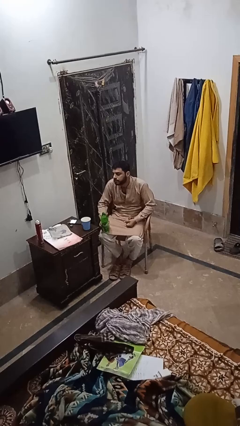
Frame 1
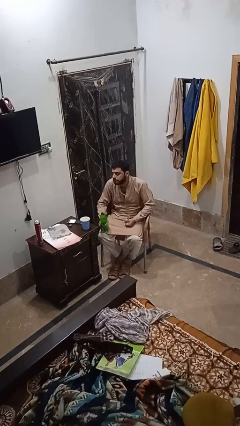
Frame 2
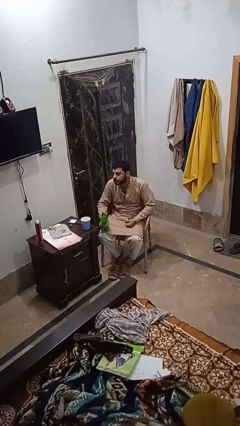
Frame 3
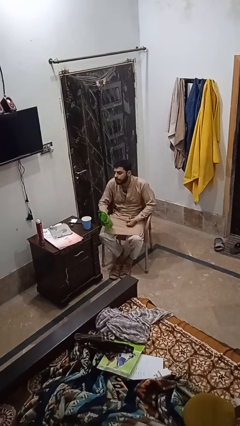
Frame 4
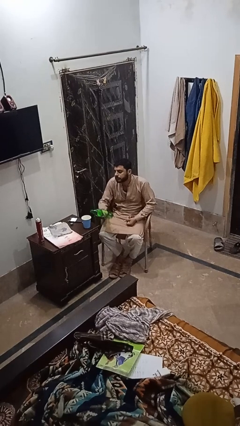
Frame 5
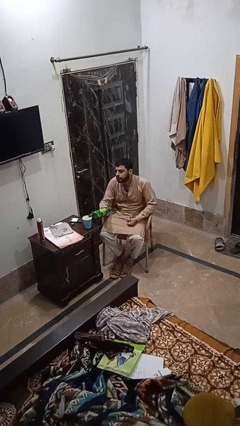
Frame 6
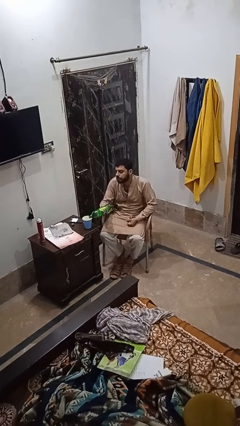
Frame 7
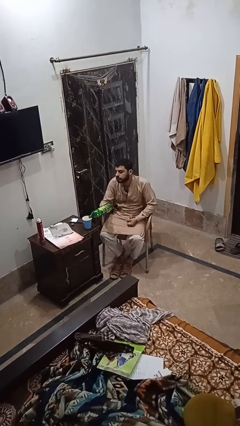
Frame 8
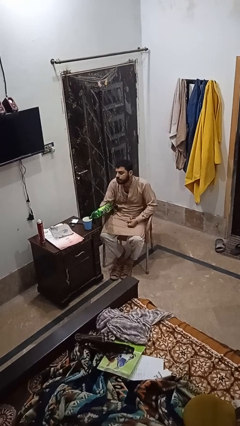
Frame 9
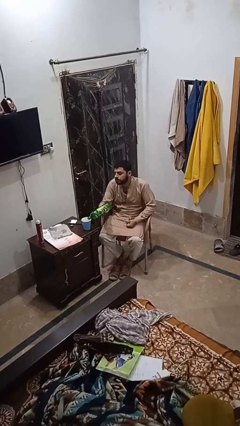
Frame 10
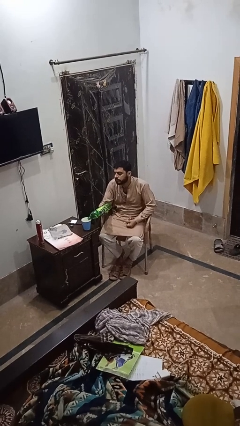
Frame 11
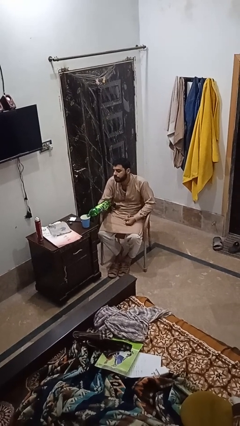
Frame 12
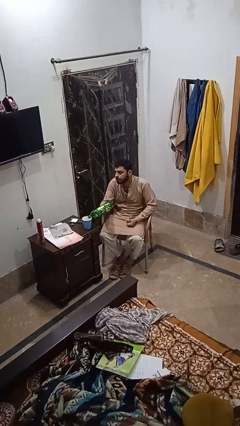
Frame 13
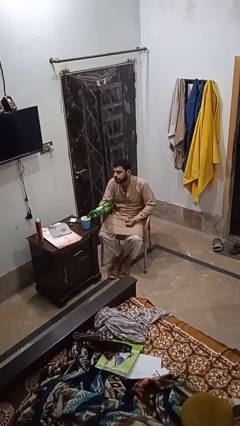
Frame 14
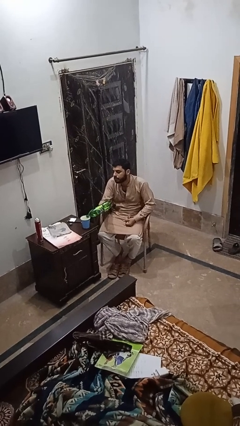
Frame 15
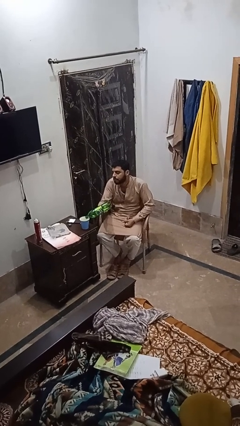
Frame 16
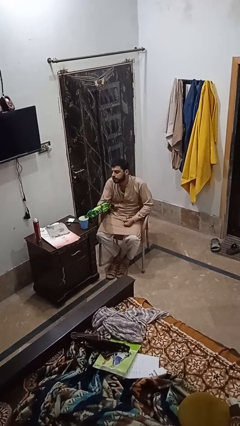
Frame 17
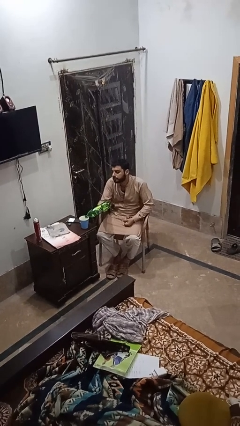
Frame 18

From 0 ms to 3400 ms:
person pours liquid into cup

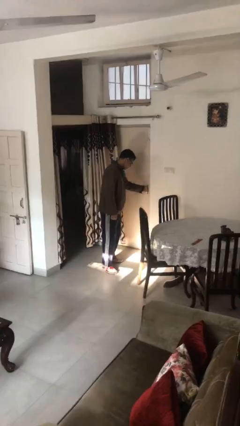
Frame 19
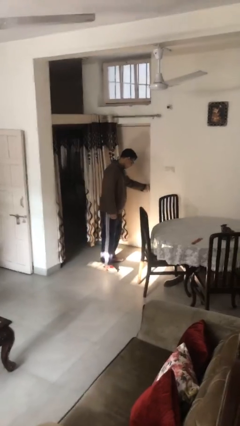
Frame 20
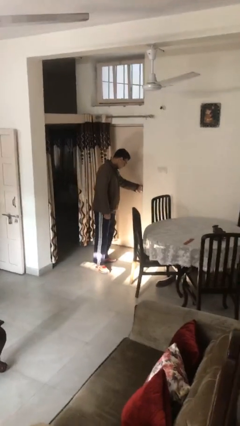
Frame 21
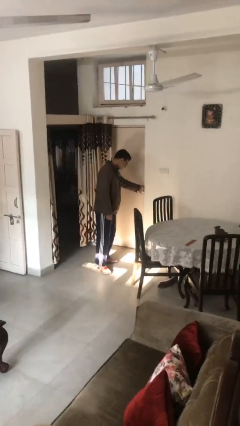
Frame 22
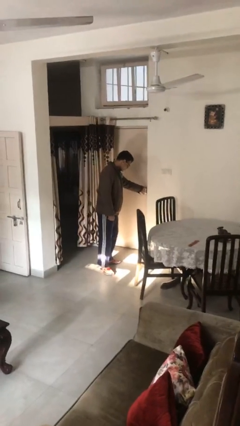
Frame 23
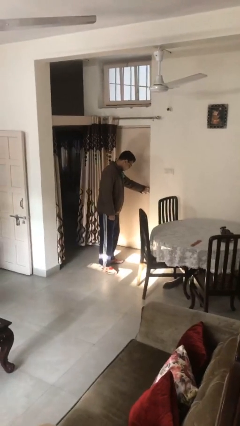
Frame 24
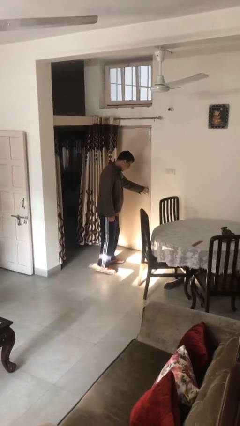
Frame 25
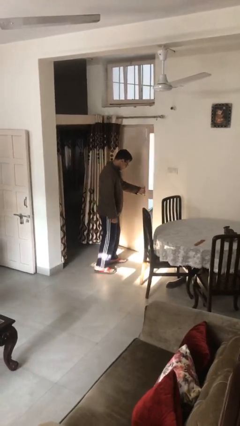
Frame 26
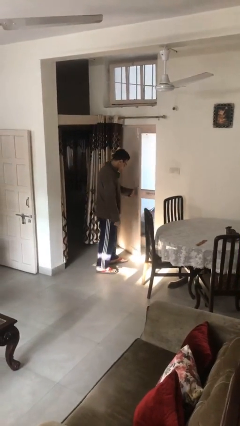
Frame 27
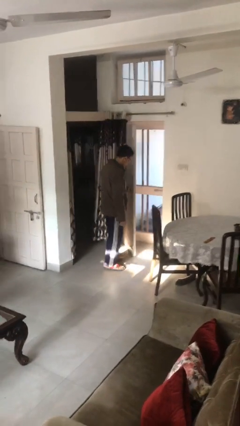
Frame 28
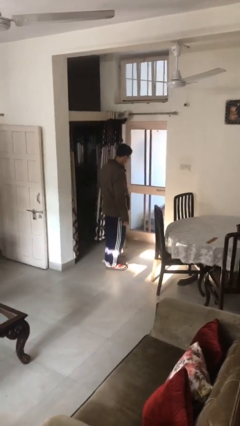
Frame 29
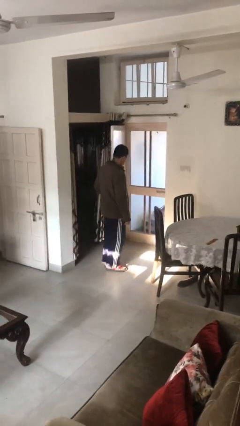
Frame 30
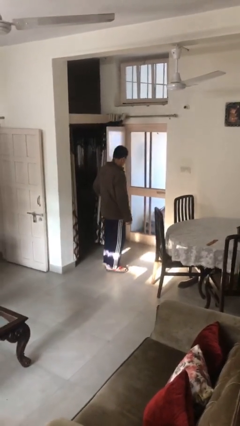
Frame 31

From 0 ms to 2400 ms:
person opens facility door

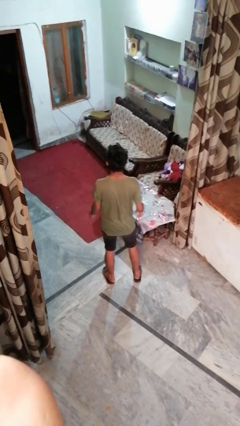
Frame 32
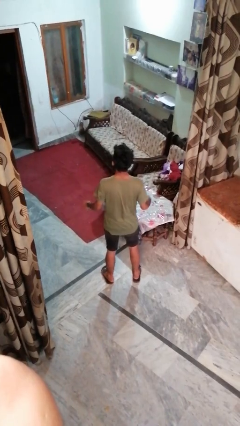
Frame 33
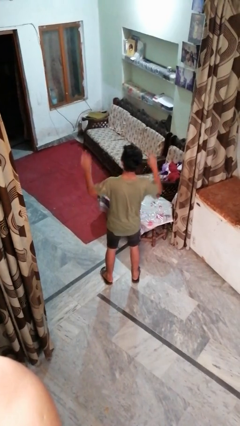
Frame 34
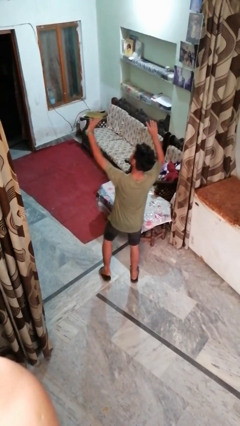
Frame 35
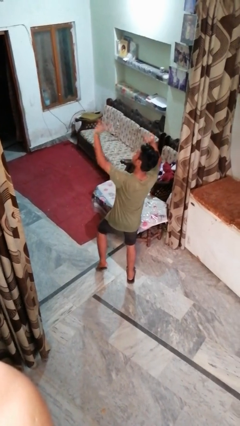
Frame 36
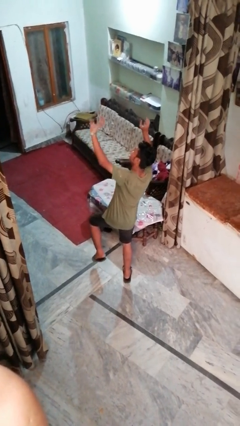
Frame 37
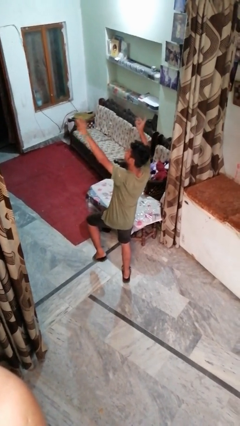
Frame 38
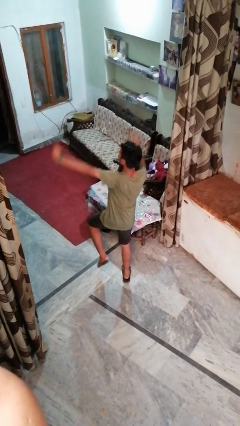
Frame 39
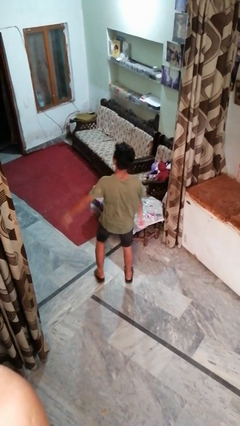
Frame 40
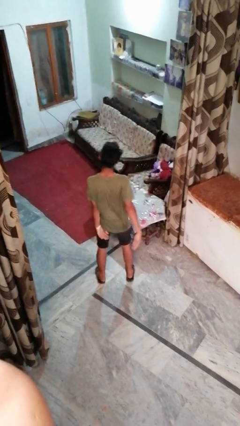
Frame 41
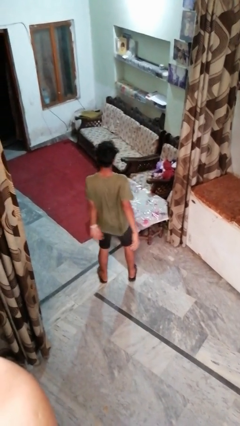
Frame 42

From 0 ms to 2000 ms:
person dances in place

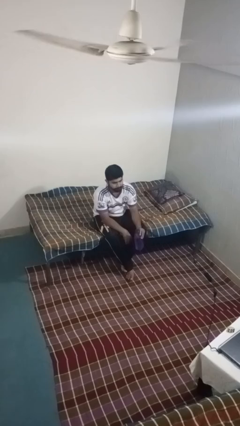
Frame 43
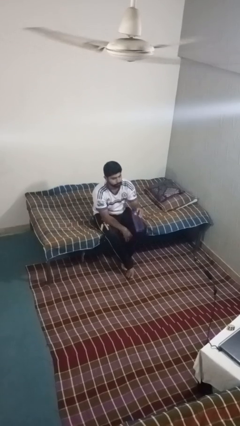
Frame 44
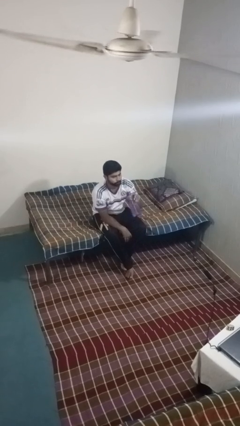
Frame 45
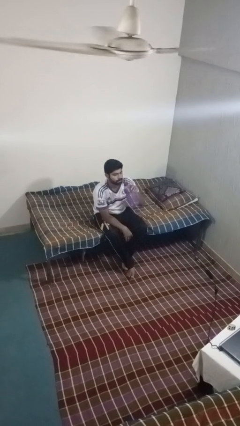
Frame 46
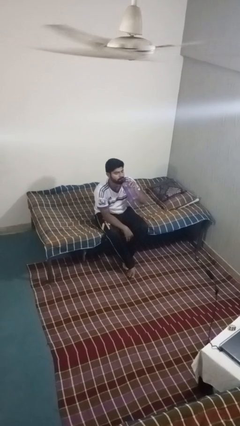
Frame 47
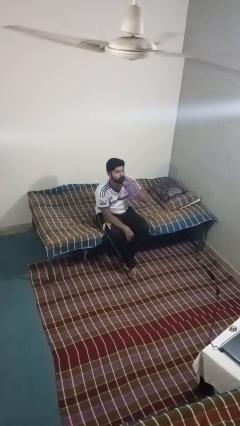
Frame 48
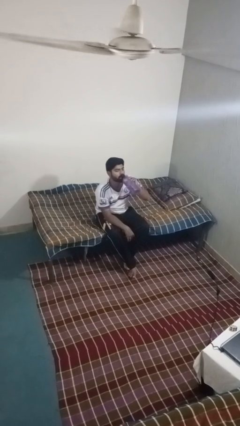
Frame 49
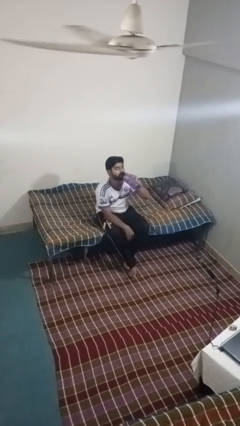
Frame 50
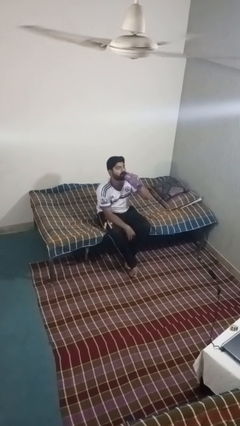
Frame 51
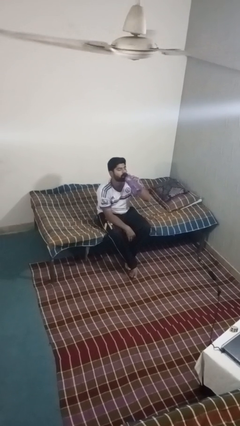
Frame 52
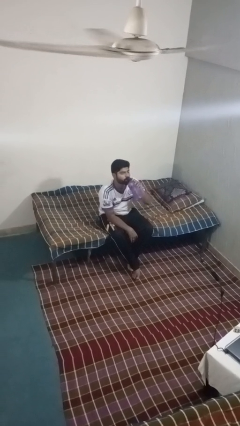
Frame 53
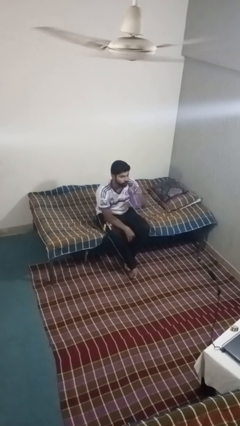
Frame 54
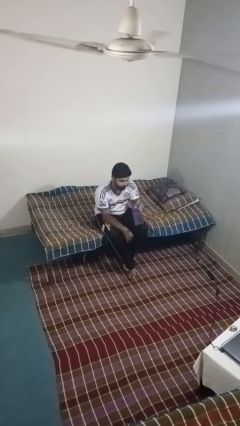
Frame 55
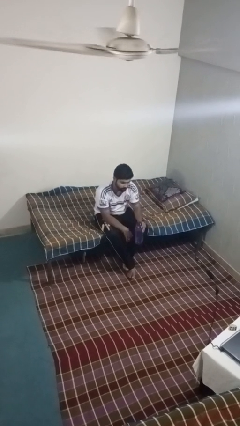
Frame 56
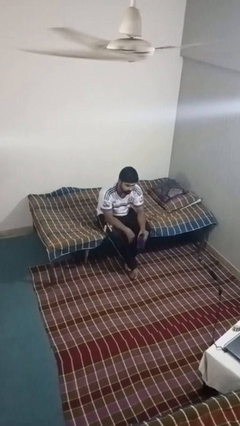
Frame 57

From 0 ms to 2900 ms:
person drinks from bottle

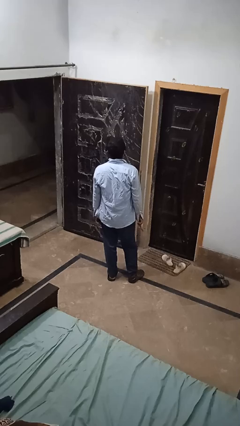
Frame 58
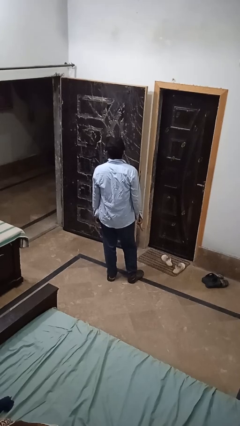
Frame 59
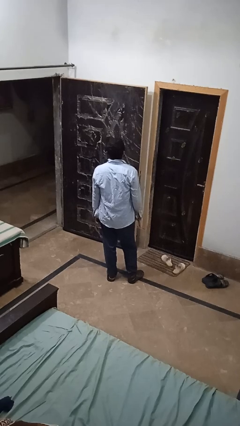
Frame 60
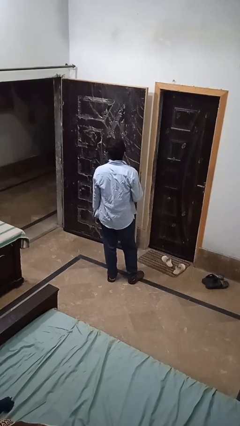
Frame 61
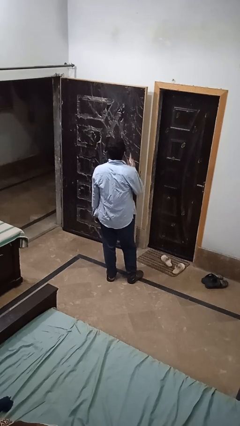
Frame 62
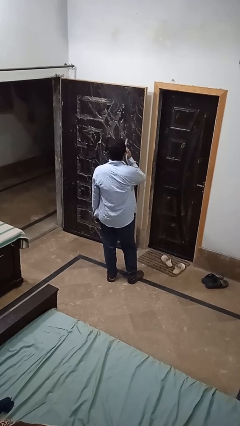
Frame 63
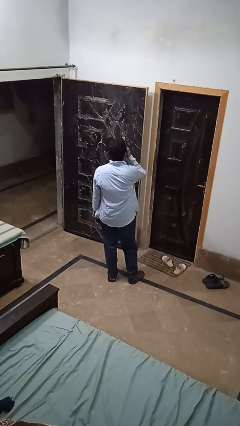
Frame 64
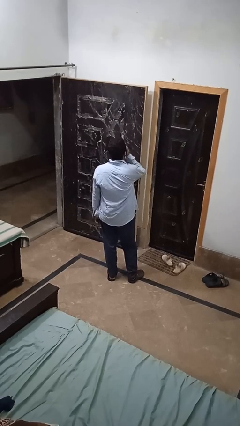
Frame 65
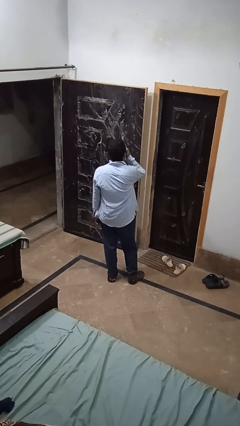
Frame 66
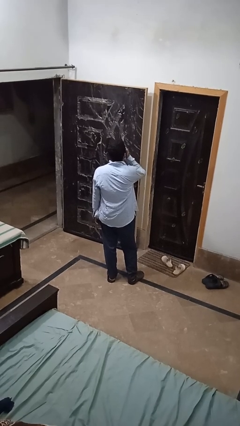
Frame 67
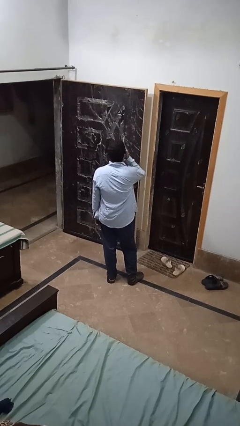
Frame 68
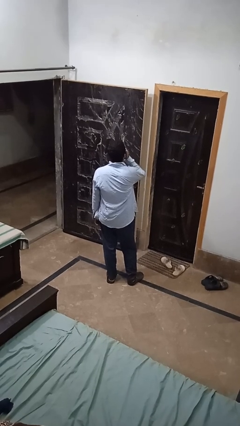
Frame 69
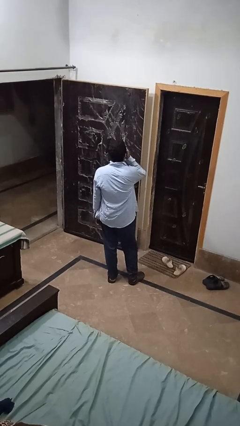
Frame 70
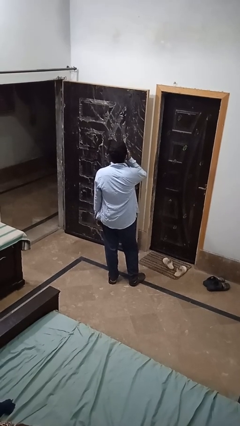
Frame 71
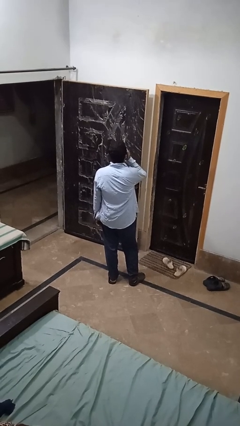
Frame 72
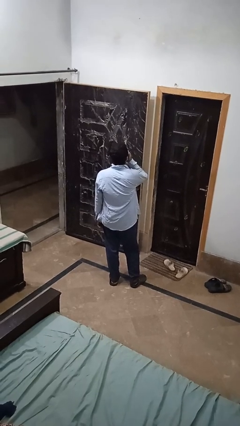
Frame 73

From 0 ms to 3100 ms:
person vapes

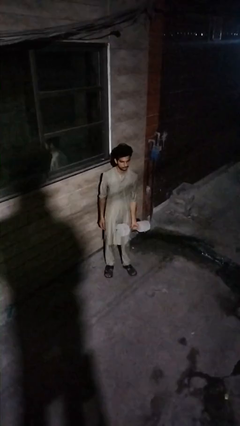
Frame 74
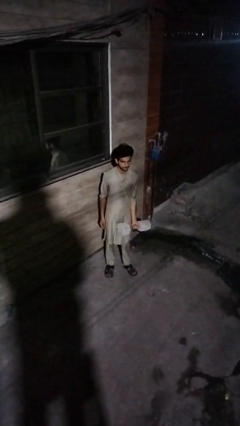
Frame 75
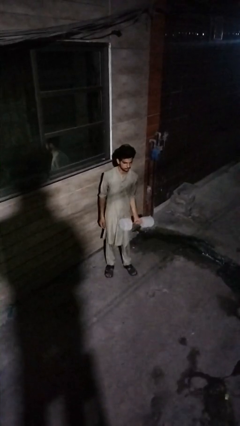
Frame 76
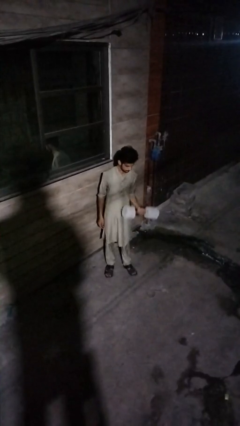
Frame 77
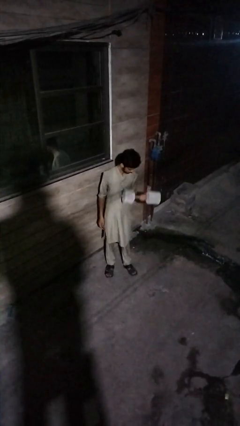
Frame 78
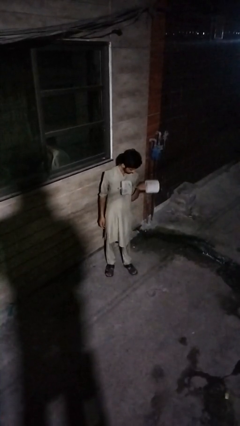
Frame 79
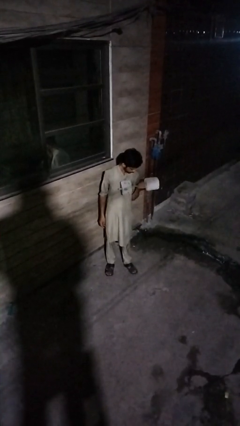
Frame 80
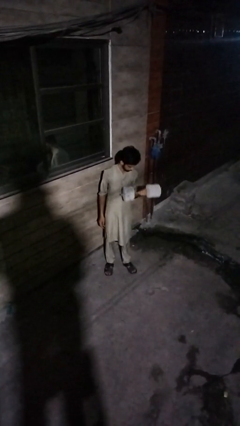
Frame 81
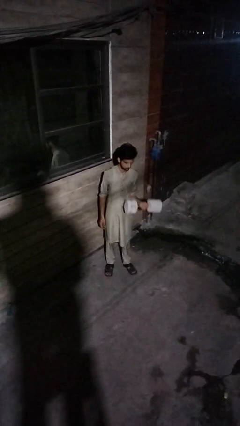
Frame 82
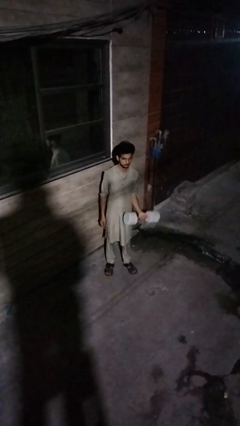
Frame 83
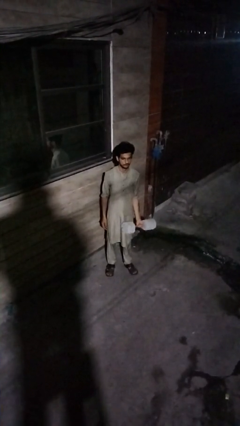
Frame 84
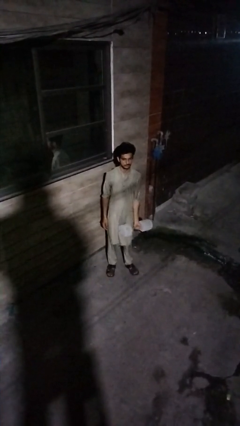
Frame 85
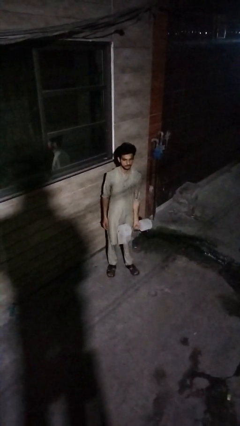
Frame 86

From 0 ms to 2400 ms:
person lifts dumbbells

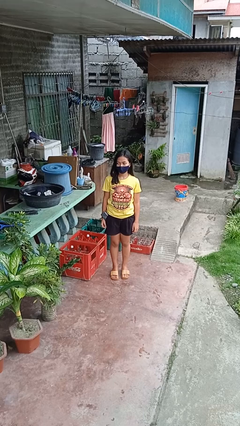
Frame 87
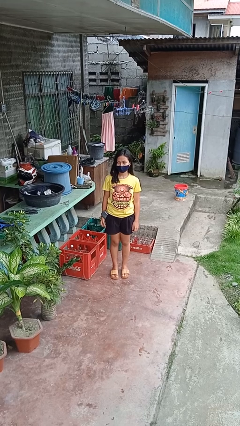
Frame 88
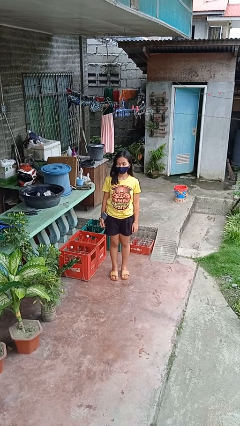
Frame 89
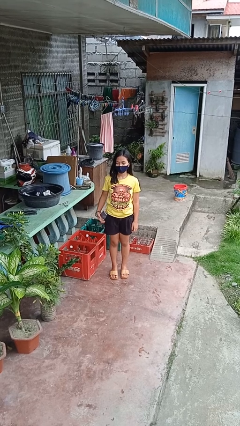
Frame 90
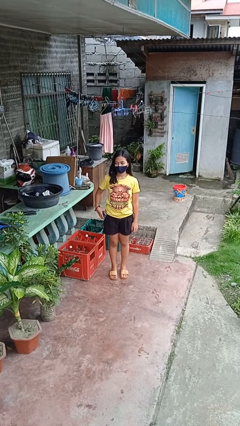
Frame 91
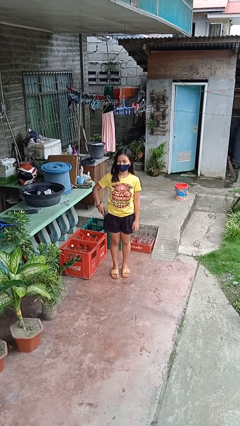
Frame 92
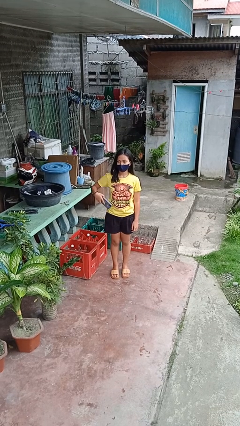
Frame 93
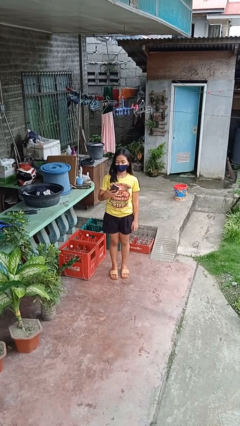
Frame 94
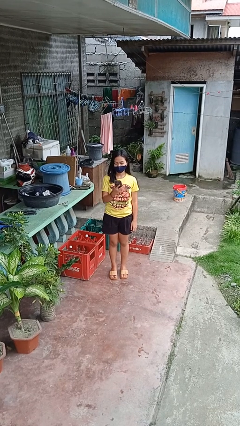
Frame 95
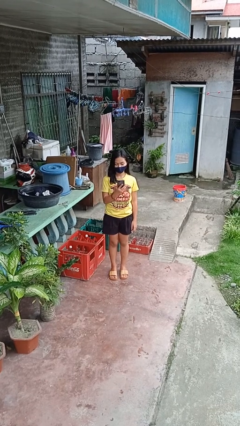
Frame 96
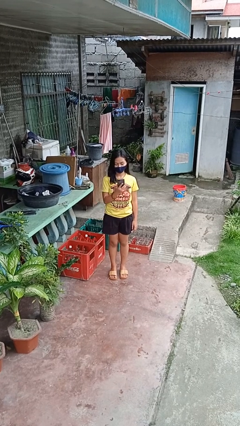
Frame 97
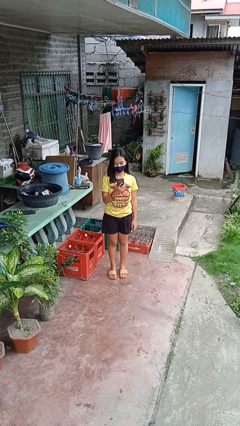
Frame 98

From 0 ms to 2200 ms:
person takes phone from pocket
